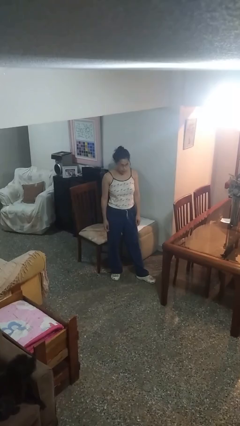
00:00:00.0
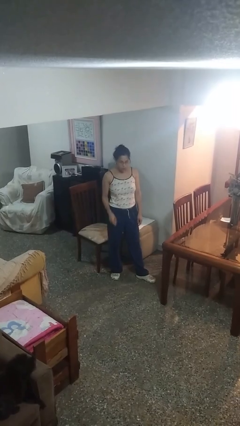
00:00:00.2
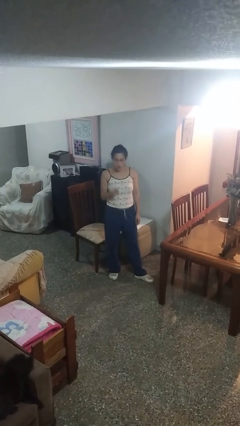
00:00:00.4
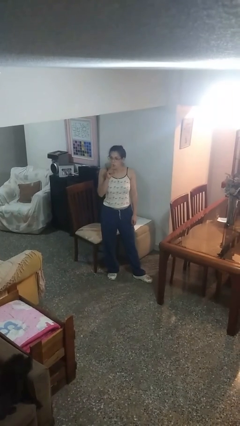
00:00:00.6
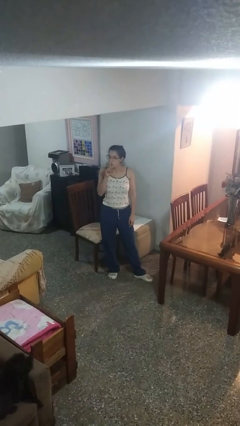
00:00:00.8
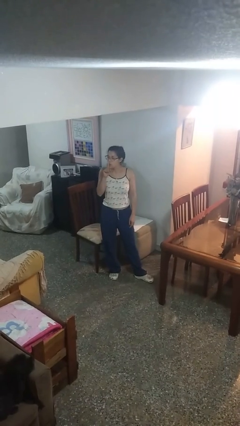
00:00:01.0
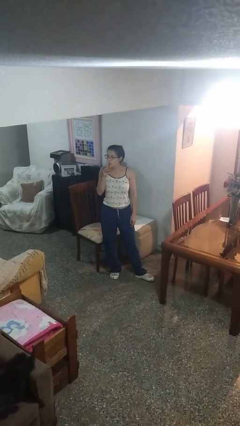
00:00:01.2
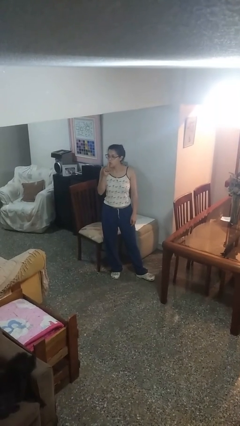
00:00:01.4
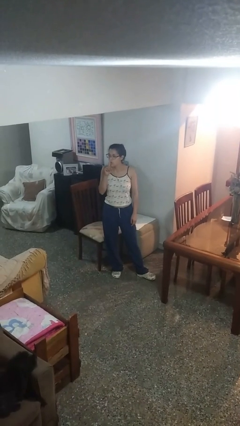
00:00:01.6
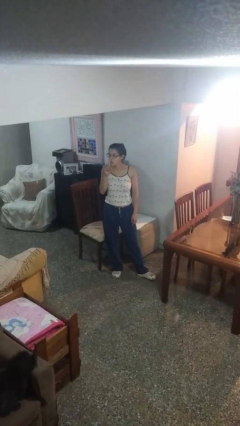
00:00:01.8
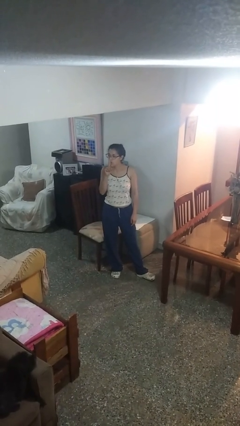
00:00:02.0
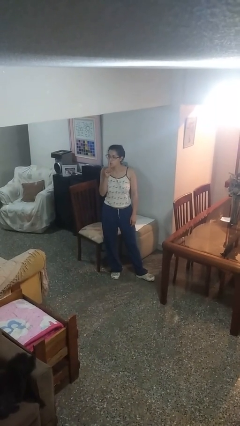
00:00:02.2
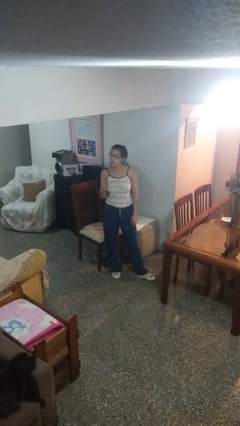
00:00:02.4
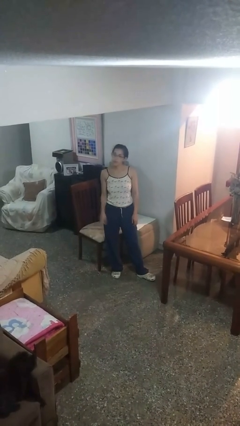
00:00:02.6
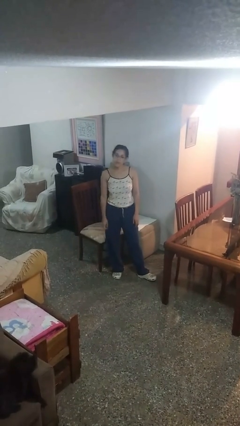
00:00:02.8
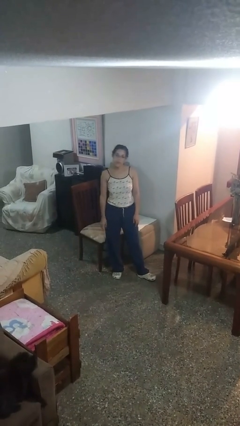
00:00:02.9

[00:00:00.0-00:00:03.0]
person gestures be quiet

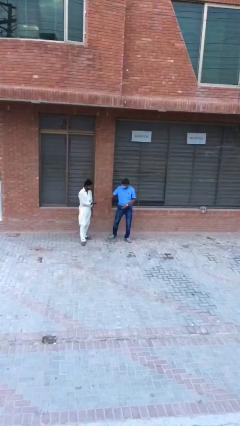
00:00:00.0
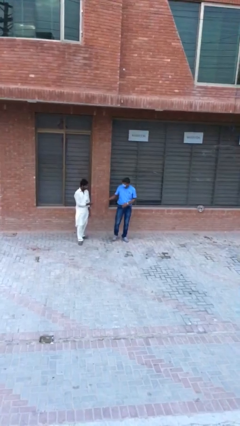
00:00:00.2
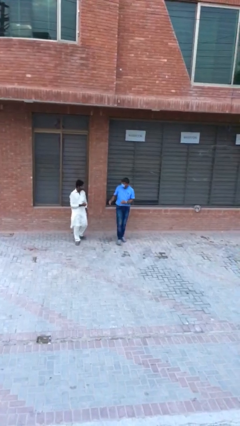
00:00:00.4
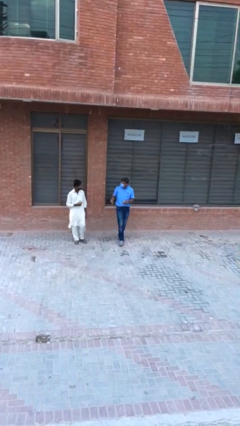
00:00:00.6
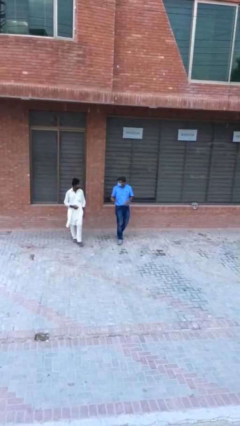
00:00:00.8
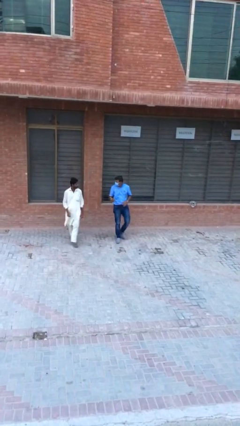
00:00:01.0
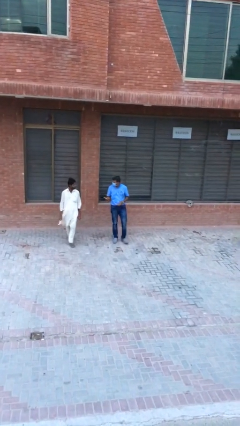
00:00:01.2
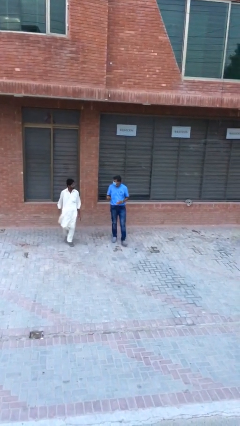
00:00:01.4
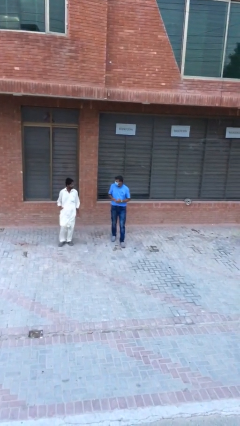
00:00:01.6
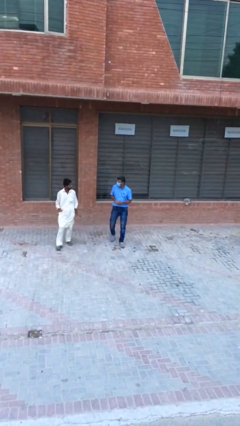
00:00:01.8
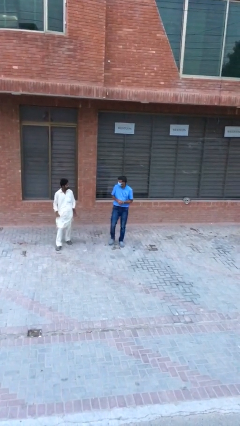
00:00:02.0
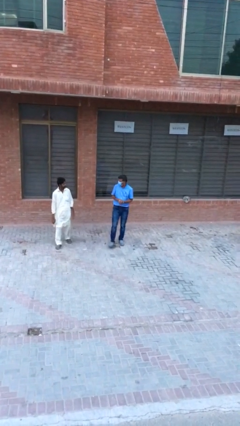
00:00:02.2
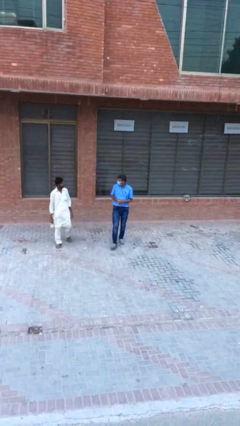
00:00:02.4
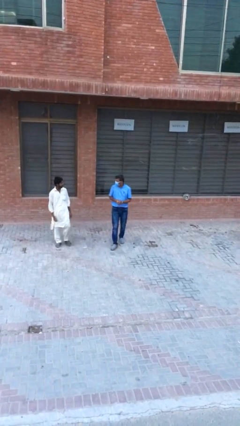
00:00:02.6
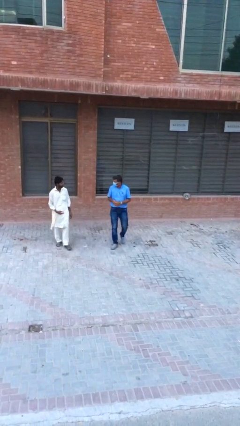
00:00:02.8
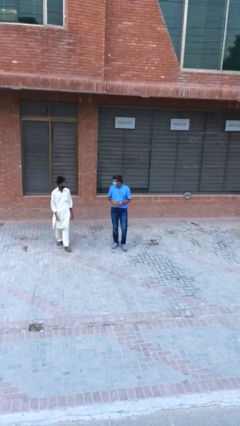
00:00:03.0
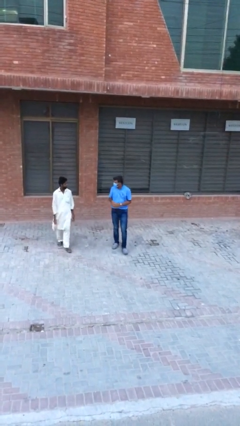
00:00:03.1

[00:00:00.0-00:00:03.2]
person talks to person

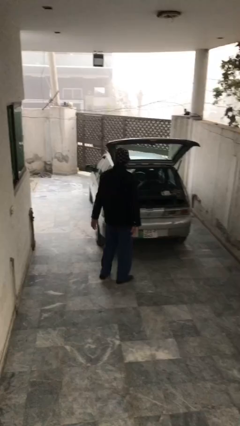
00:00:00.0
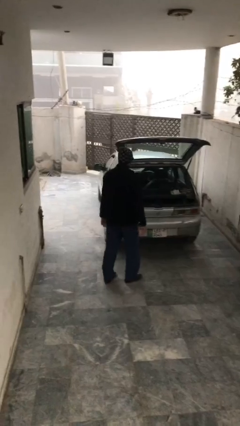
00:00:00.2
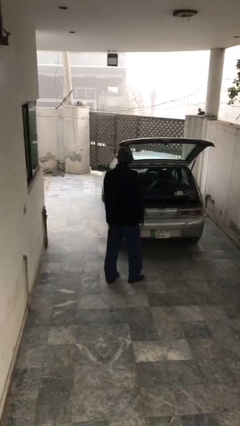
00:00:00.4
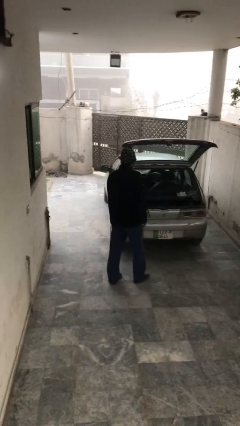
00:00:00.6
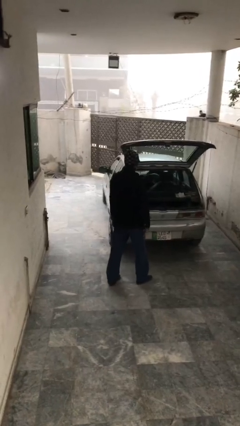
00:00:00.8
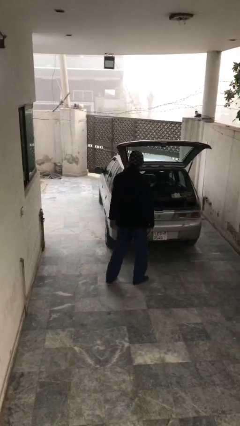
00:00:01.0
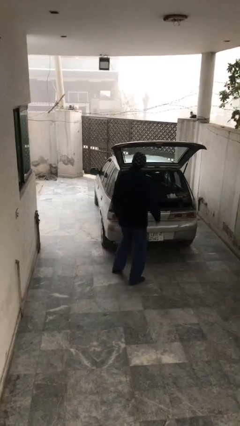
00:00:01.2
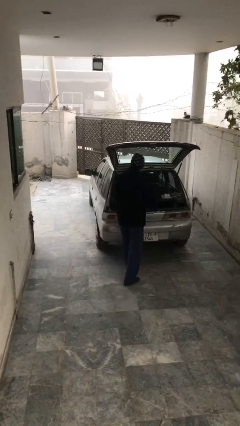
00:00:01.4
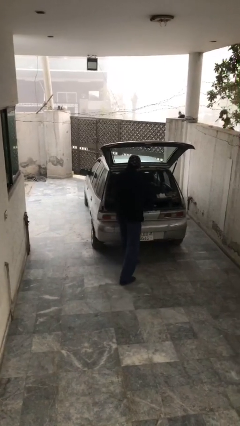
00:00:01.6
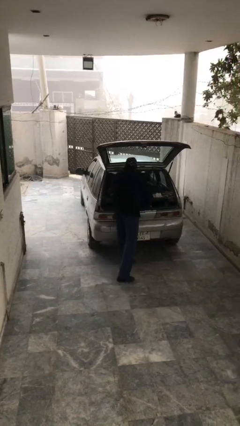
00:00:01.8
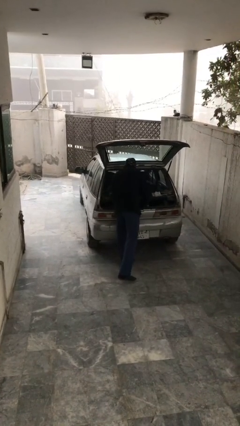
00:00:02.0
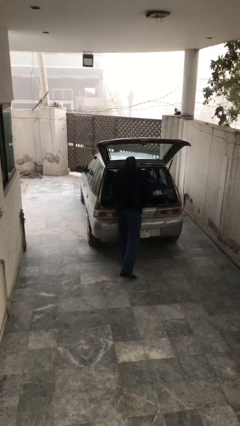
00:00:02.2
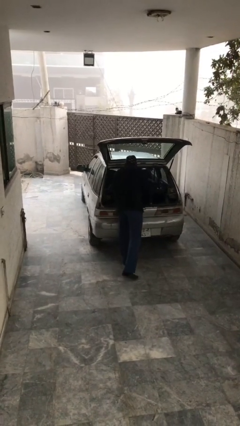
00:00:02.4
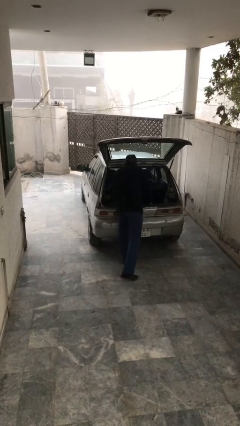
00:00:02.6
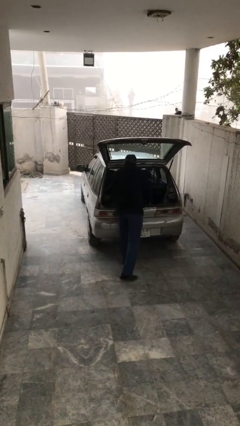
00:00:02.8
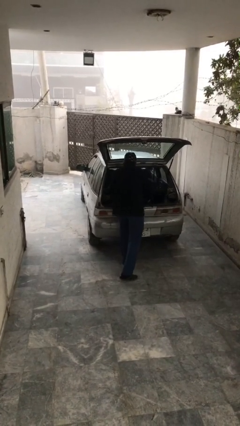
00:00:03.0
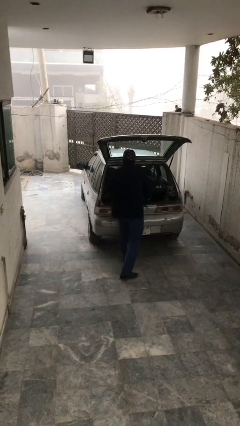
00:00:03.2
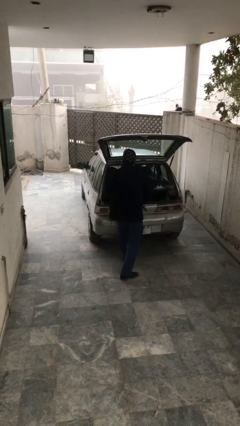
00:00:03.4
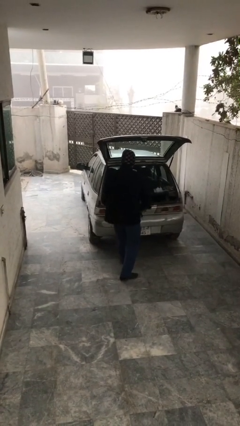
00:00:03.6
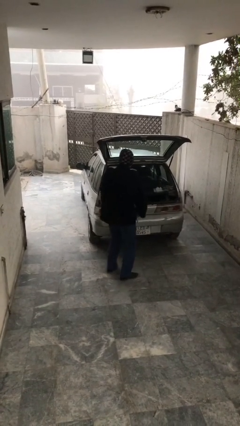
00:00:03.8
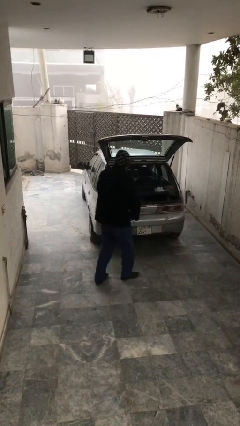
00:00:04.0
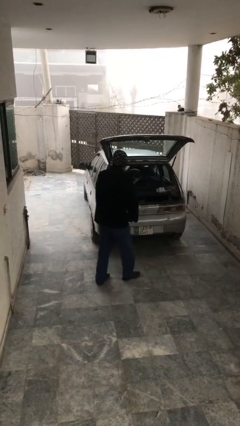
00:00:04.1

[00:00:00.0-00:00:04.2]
person unloads car

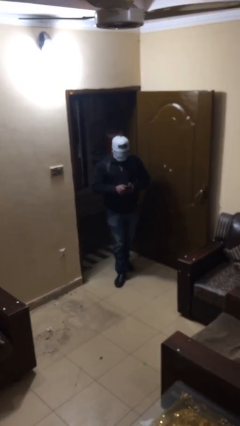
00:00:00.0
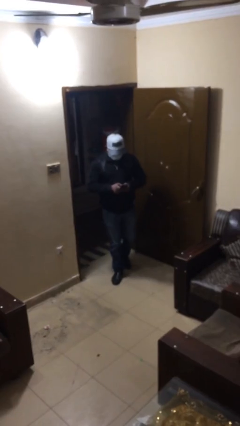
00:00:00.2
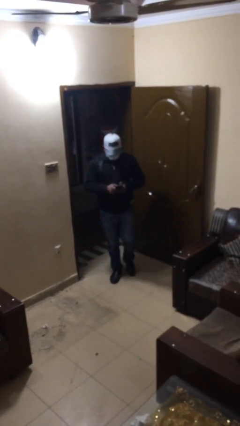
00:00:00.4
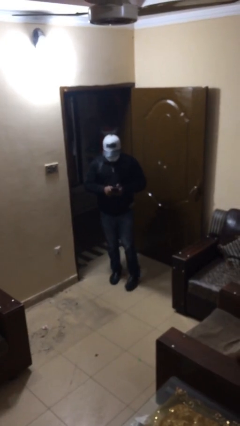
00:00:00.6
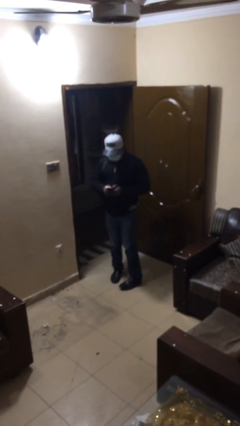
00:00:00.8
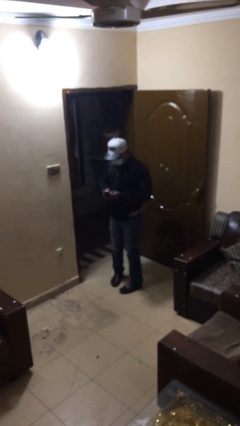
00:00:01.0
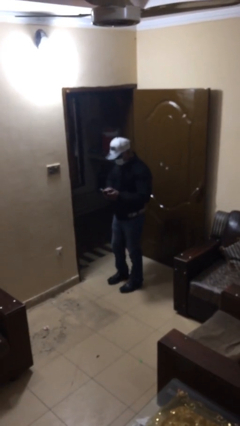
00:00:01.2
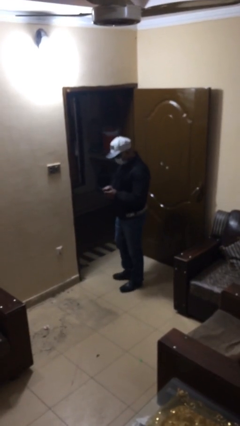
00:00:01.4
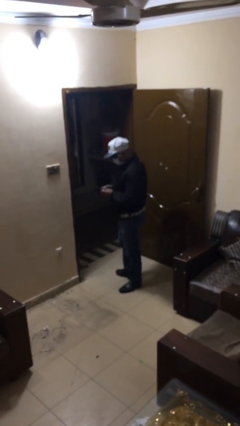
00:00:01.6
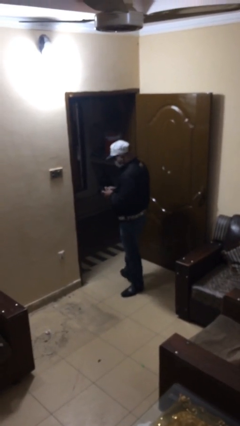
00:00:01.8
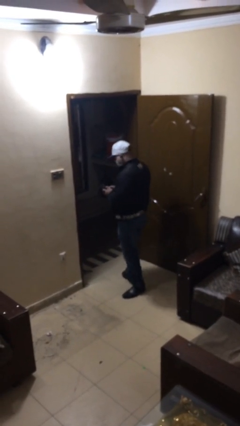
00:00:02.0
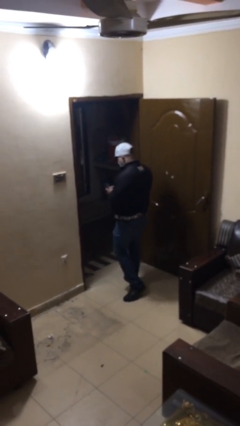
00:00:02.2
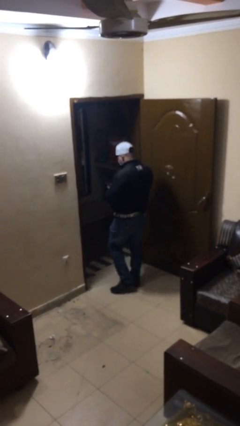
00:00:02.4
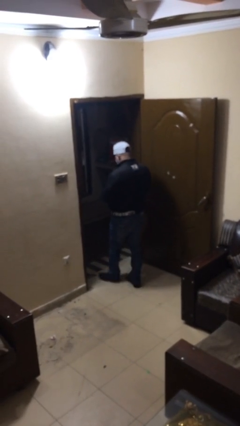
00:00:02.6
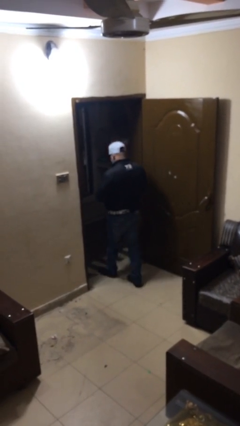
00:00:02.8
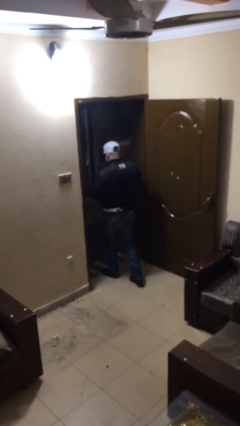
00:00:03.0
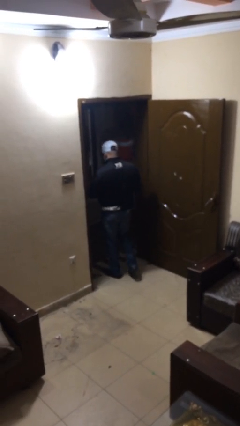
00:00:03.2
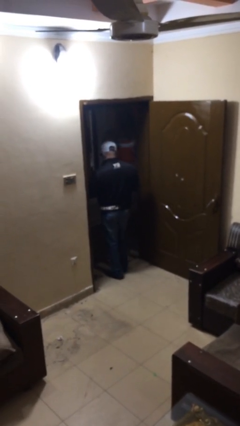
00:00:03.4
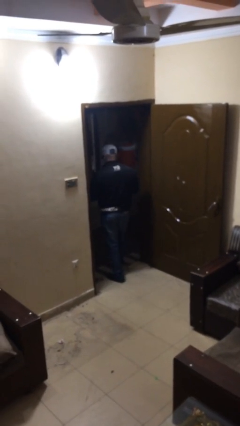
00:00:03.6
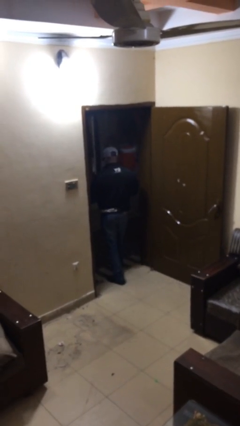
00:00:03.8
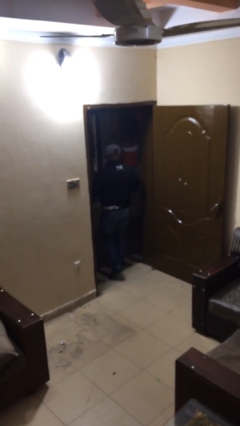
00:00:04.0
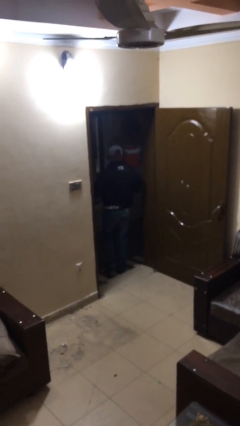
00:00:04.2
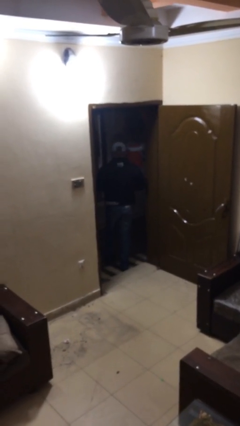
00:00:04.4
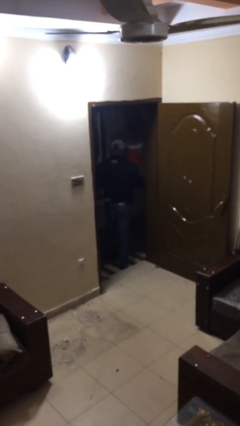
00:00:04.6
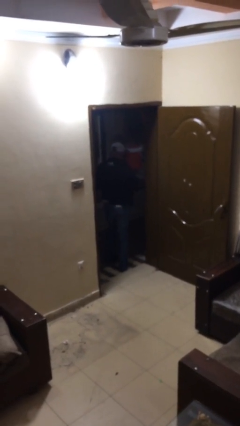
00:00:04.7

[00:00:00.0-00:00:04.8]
person exits scene through structure

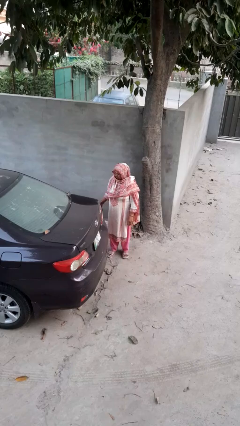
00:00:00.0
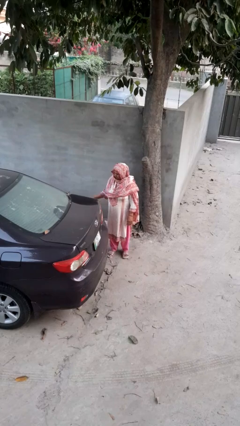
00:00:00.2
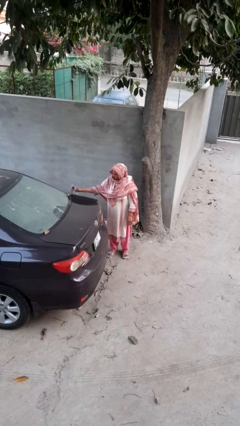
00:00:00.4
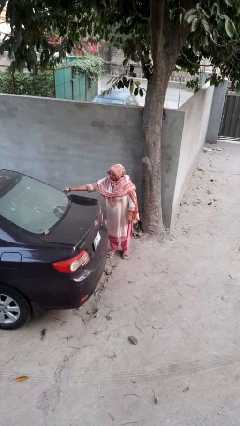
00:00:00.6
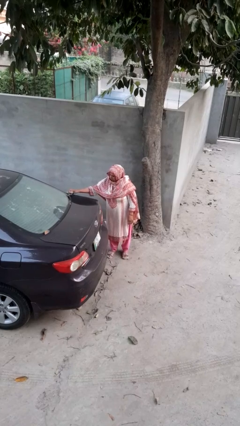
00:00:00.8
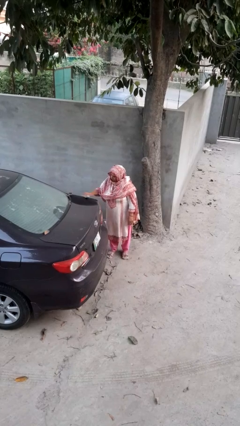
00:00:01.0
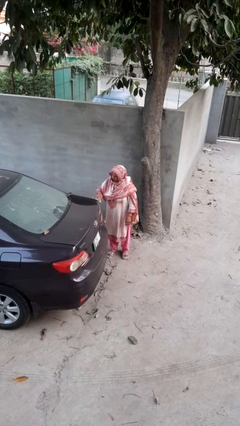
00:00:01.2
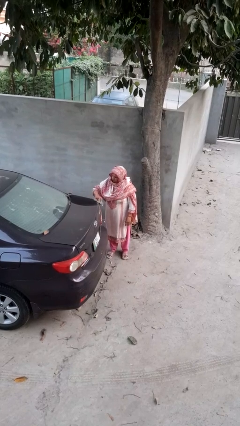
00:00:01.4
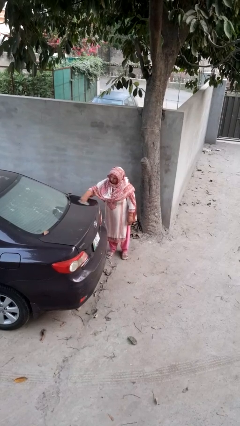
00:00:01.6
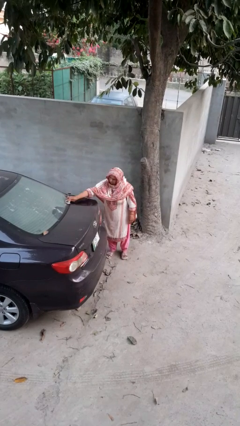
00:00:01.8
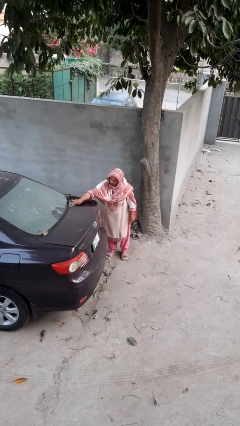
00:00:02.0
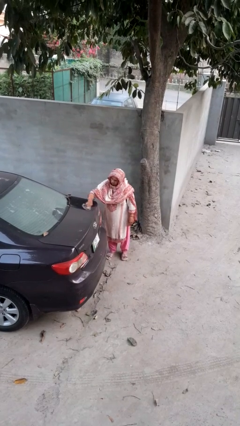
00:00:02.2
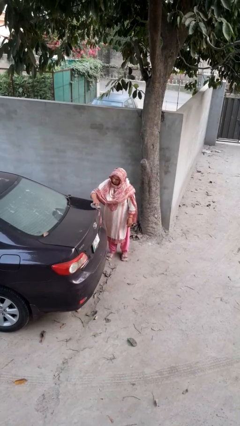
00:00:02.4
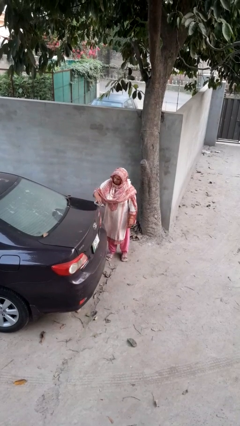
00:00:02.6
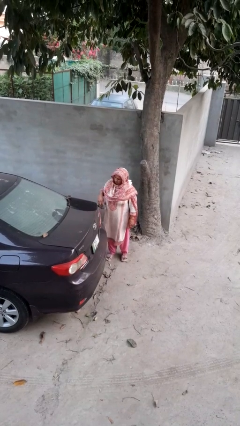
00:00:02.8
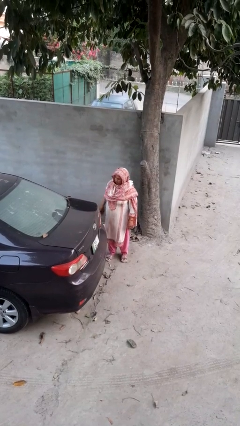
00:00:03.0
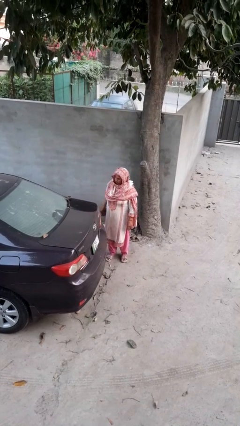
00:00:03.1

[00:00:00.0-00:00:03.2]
person polishes car with rag
